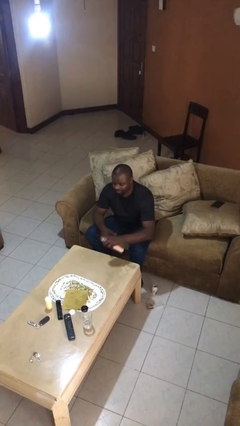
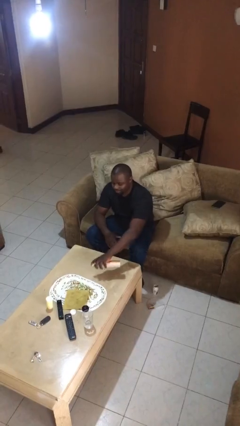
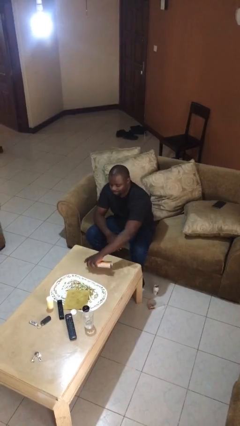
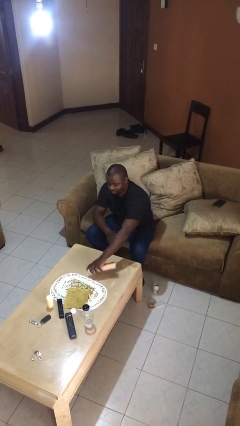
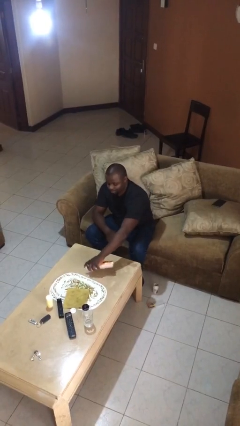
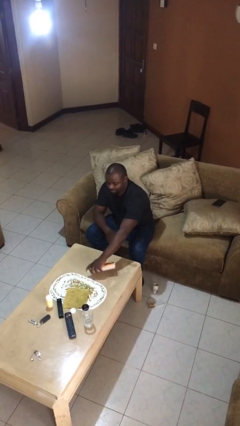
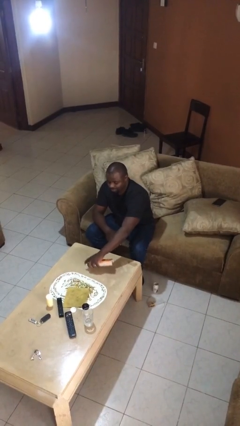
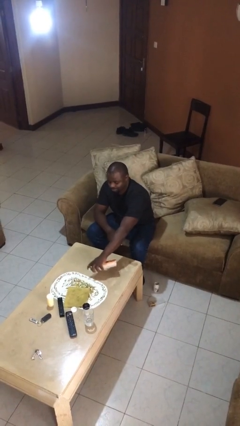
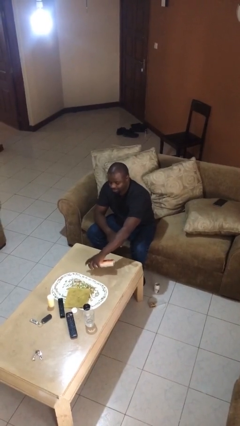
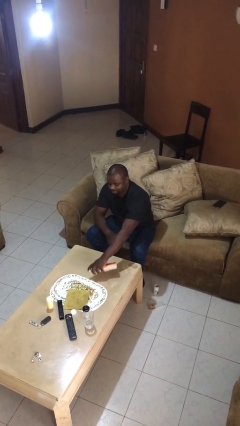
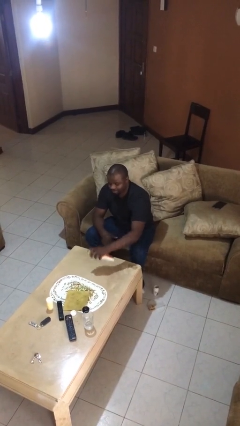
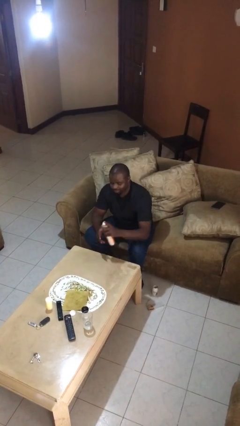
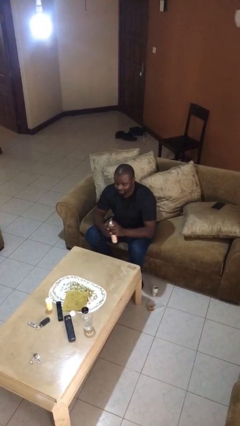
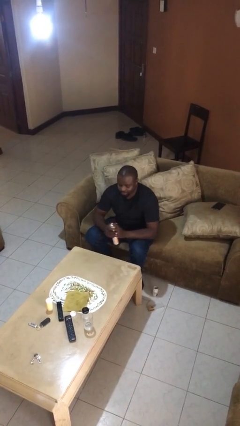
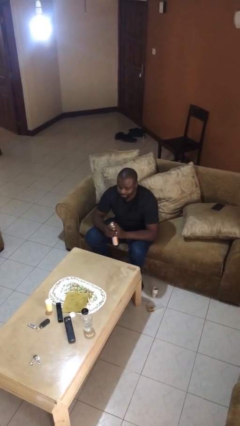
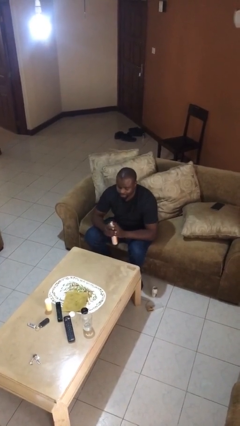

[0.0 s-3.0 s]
person sprays from bottle

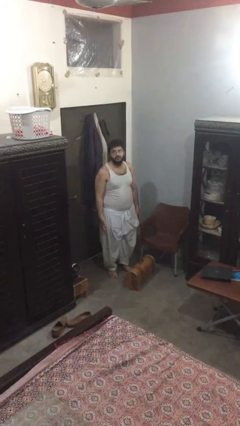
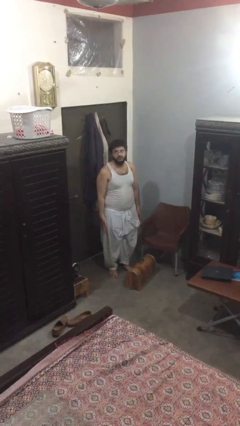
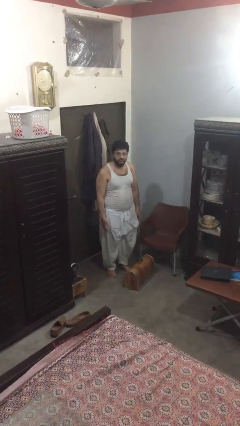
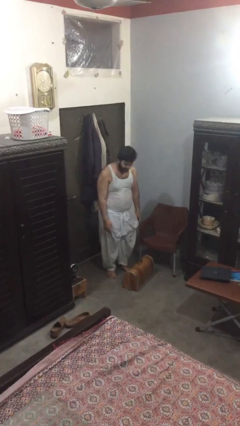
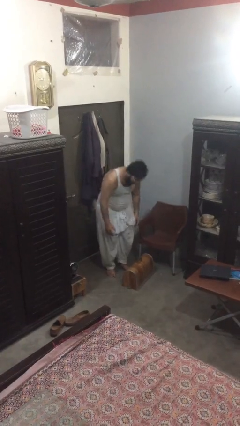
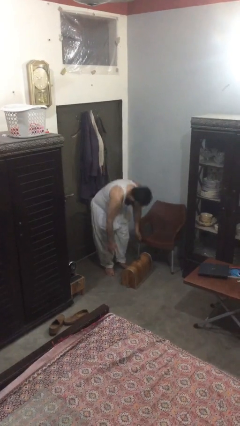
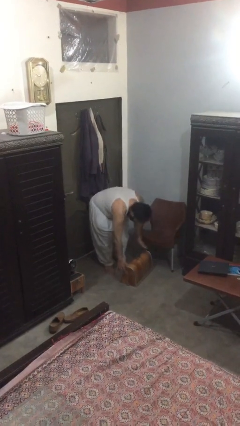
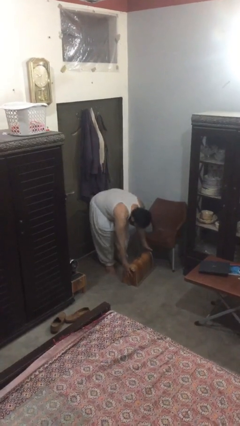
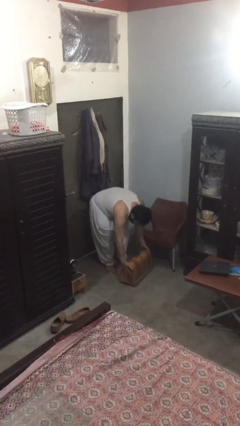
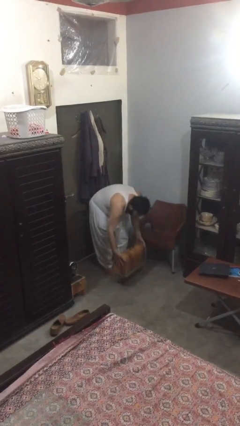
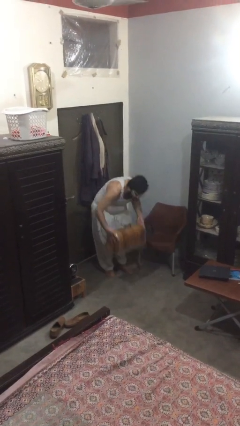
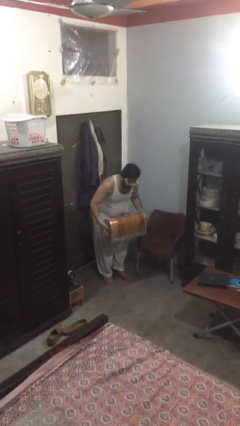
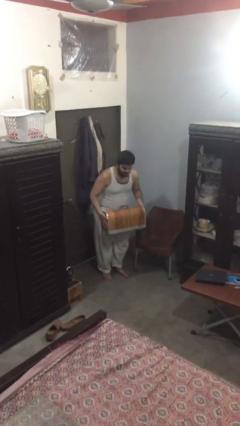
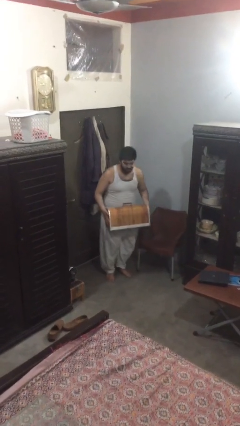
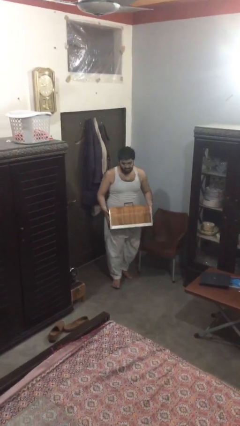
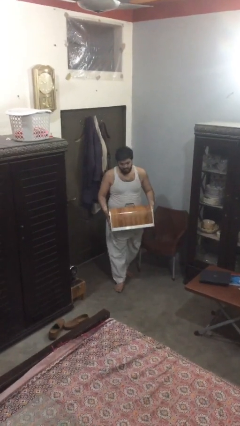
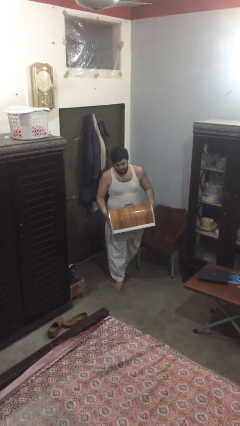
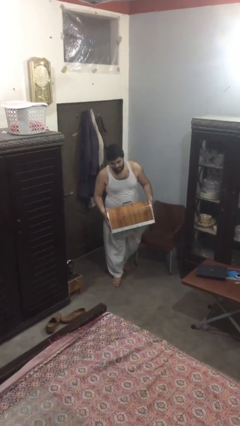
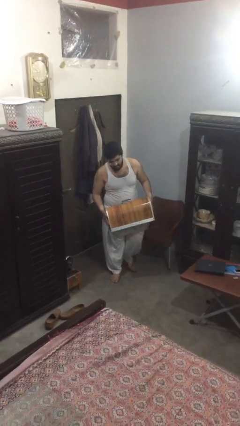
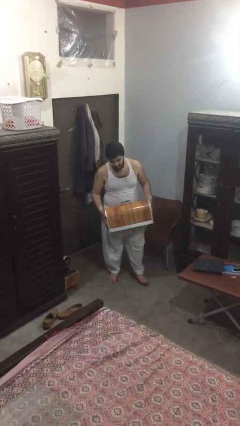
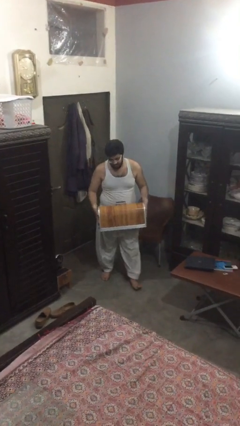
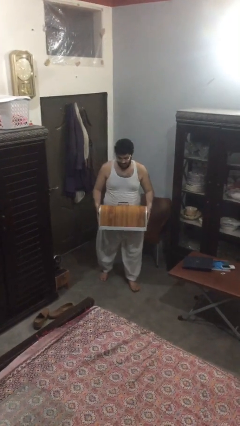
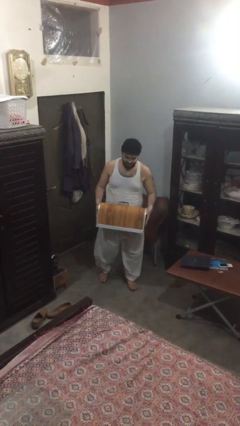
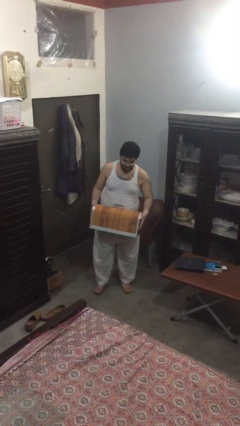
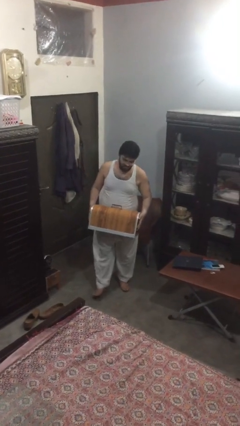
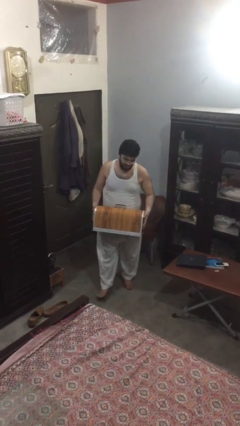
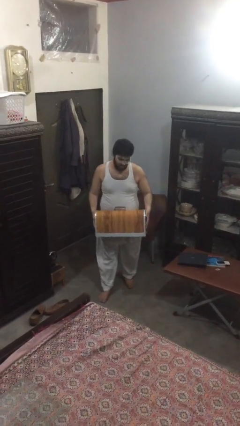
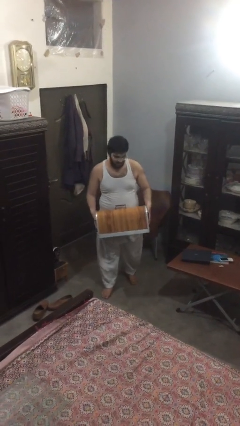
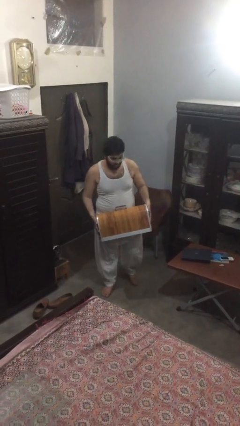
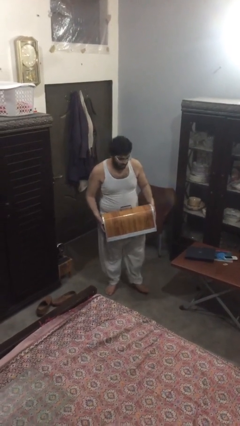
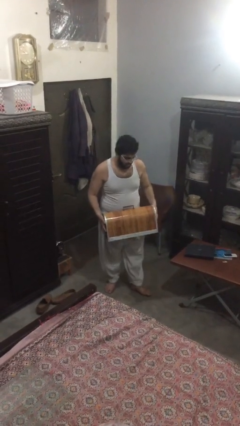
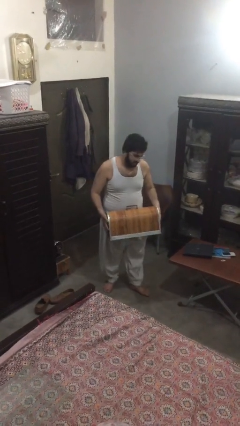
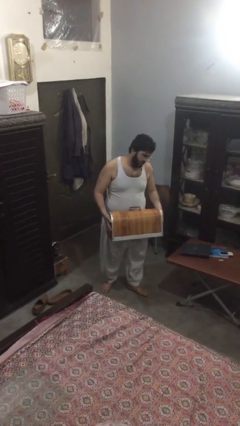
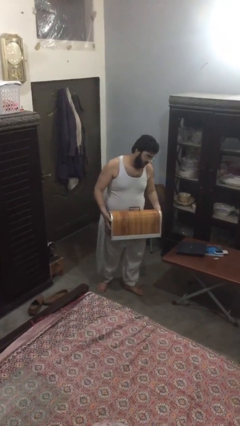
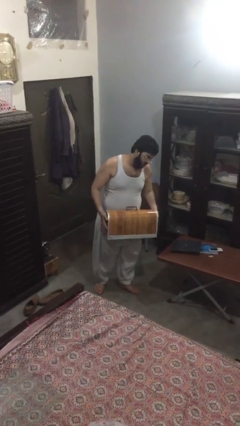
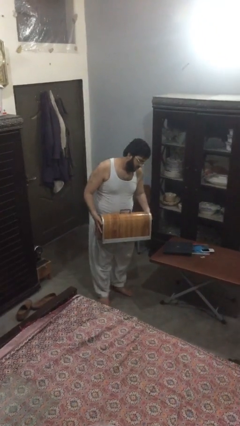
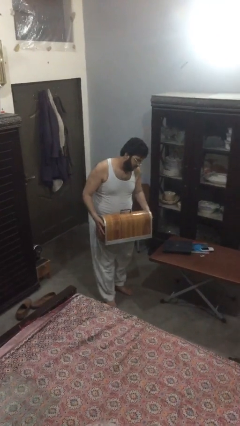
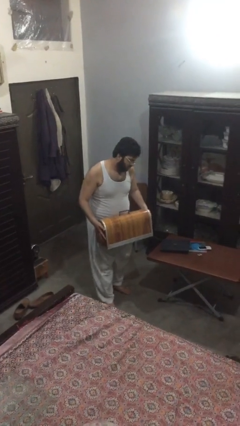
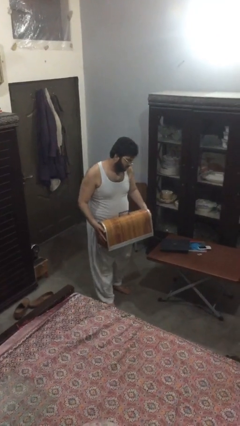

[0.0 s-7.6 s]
person carries heavy object

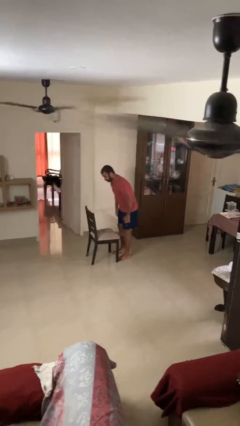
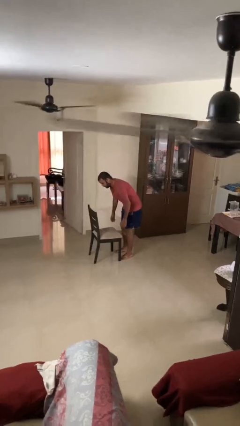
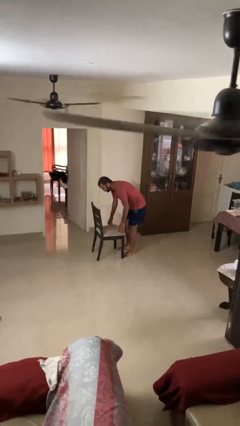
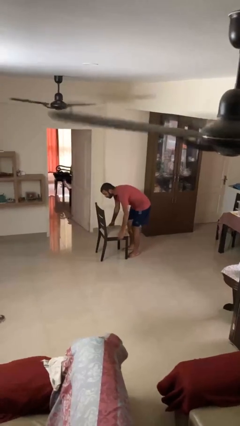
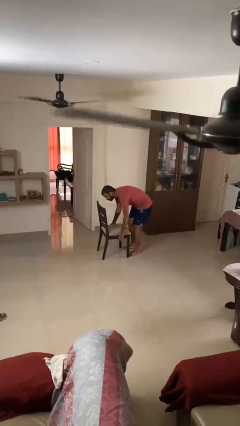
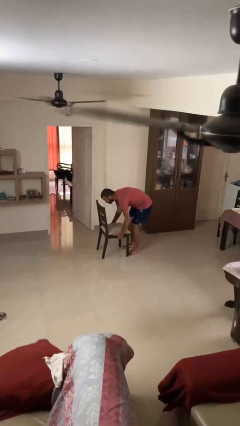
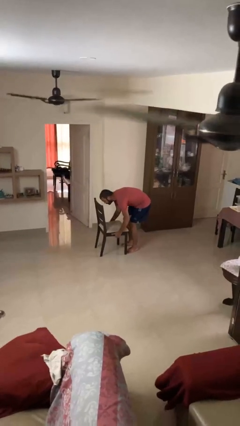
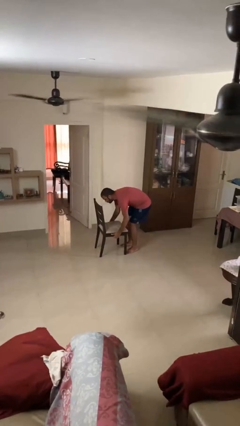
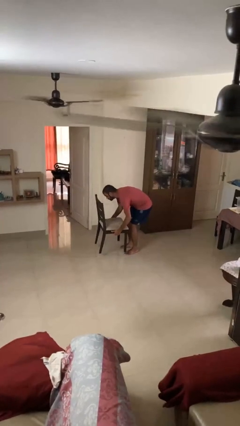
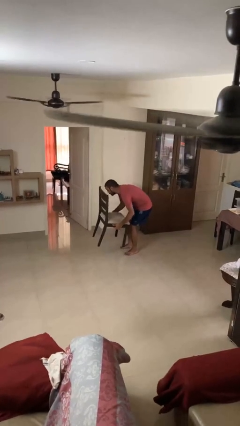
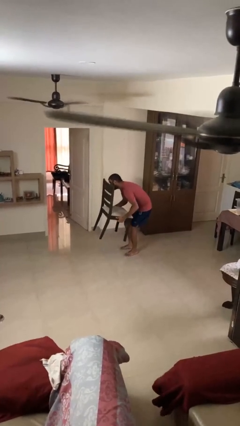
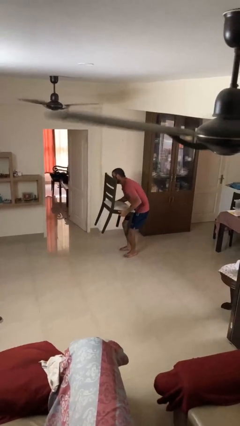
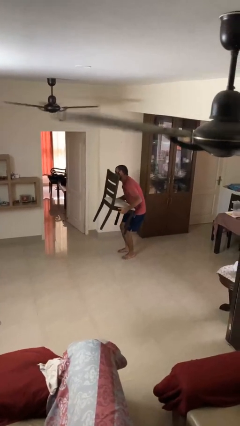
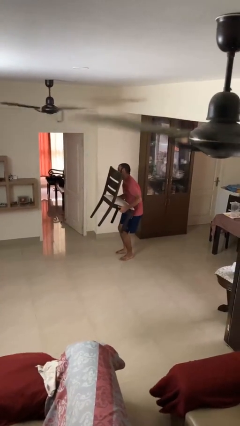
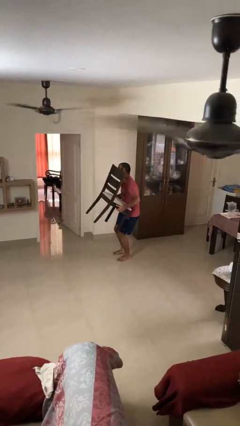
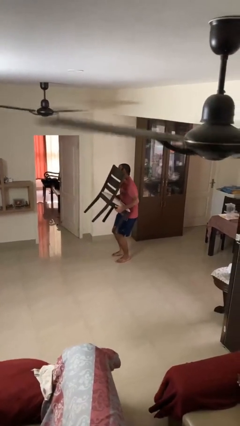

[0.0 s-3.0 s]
person picks up object from floor

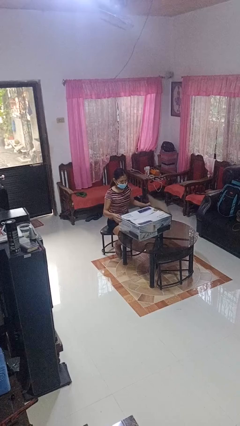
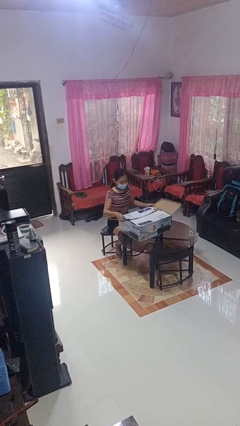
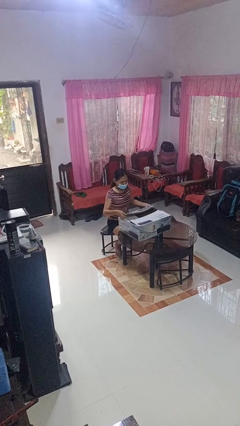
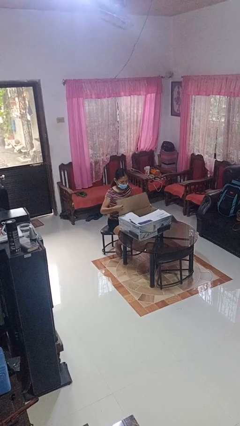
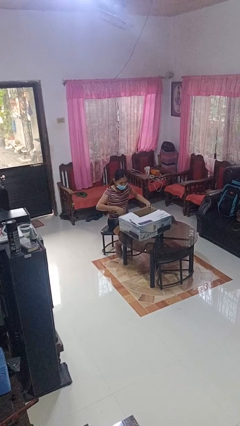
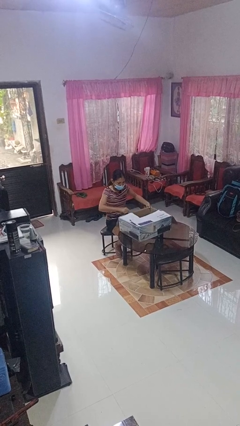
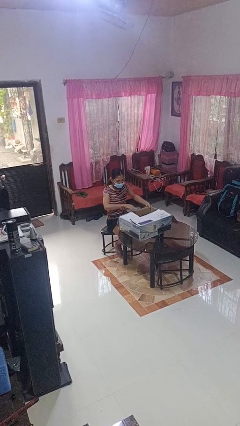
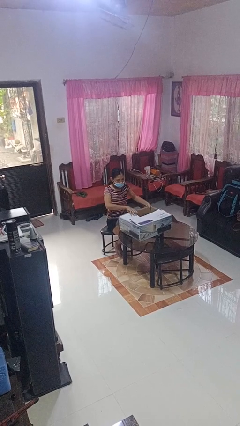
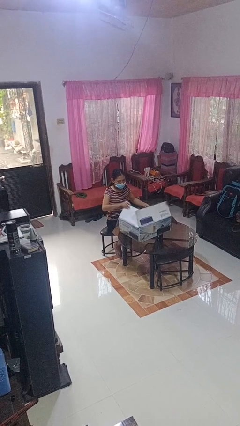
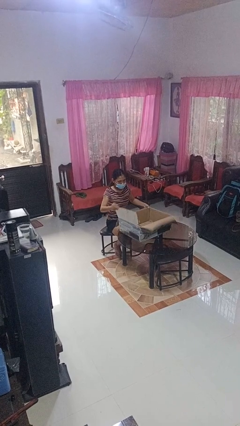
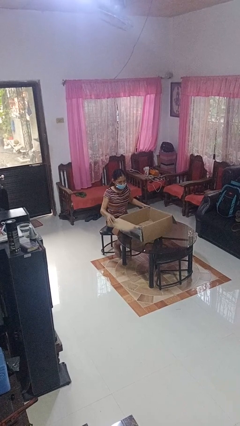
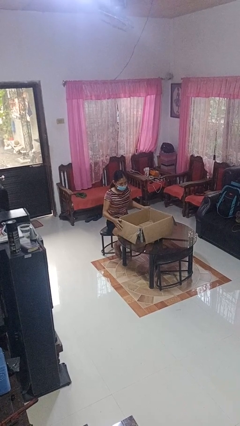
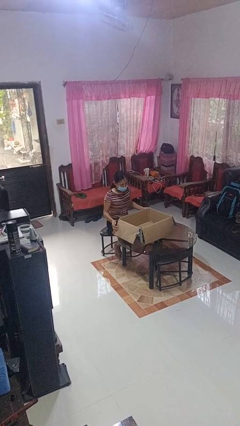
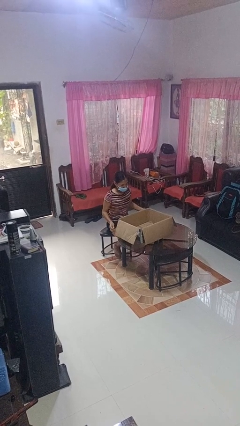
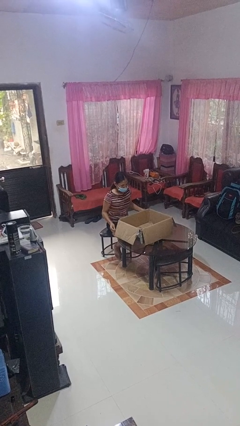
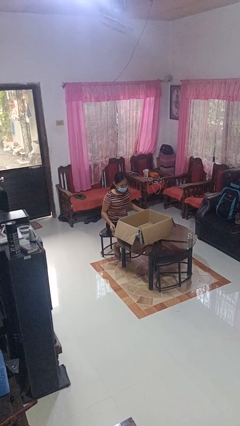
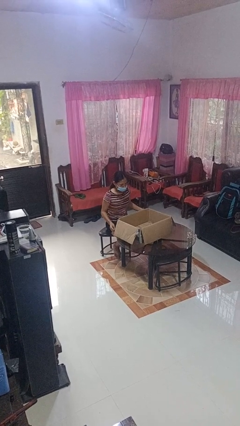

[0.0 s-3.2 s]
person opens box

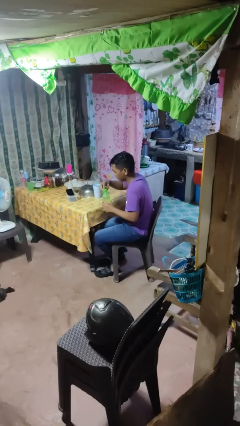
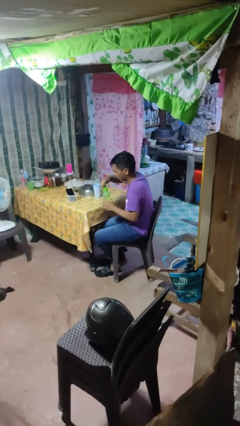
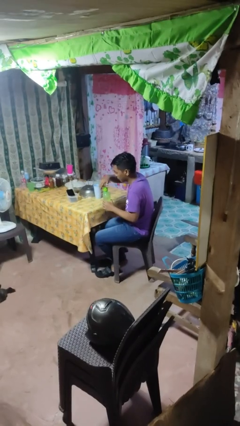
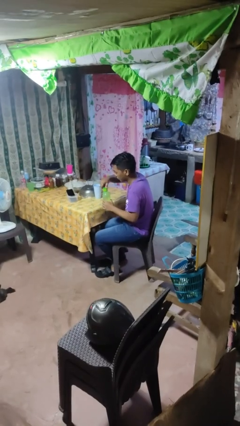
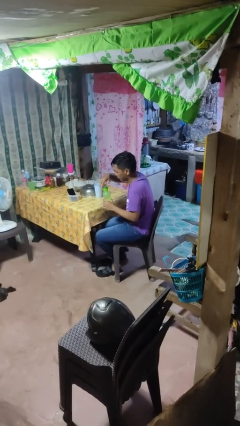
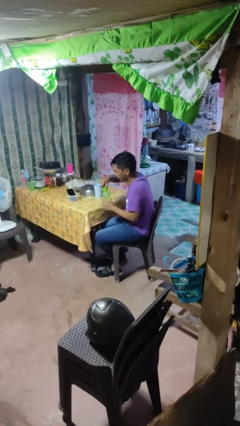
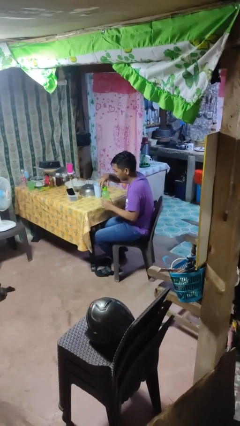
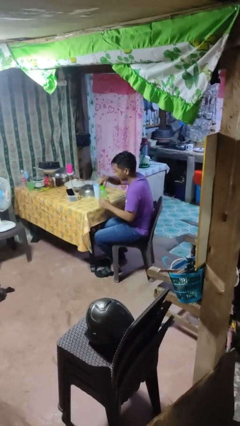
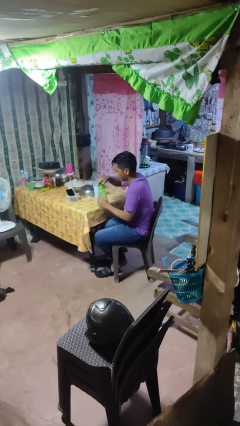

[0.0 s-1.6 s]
person screws lid to bottle
